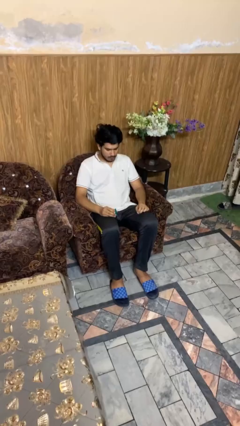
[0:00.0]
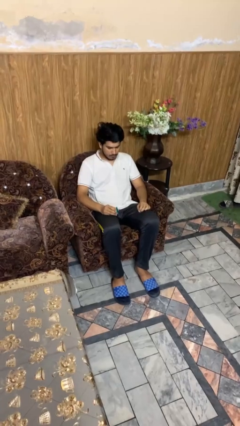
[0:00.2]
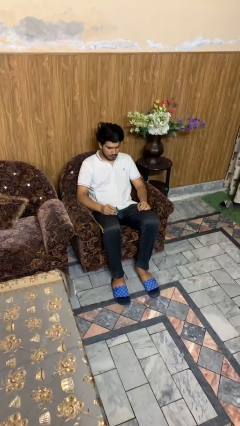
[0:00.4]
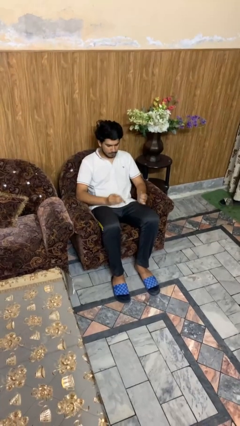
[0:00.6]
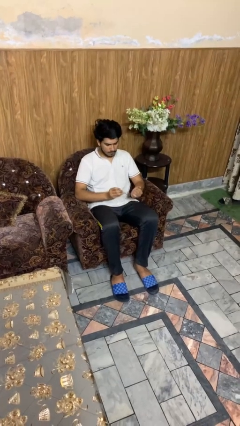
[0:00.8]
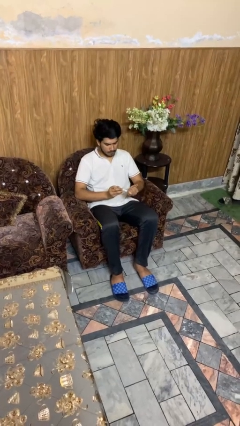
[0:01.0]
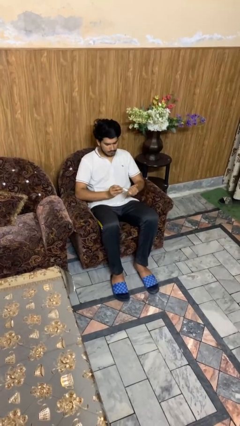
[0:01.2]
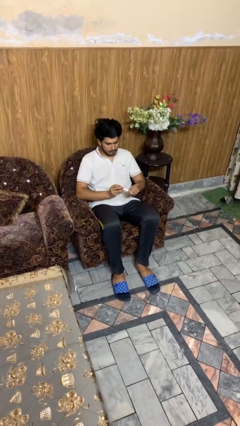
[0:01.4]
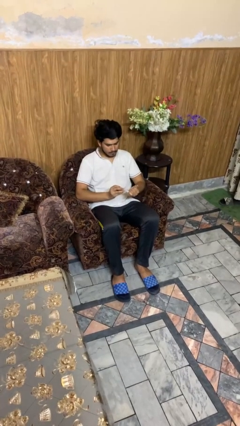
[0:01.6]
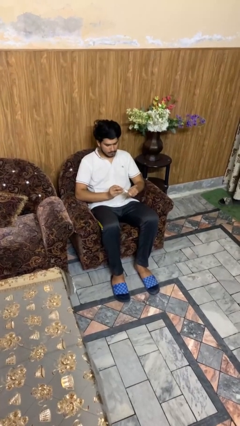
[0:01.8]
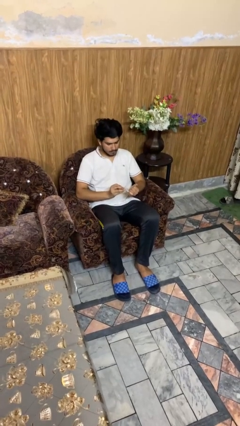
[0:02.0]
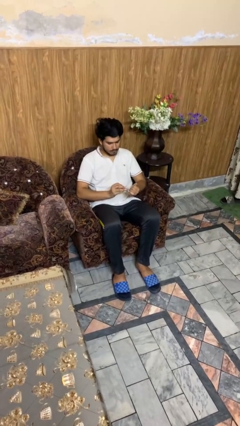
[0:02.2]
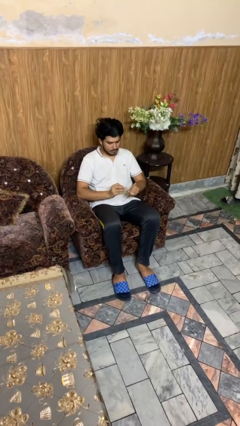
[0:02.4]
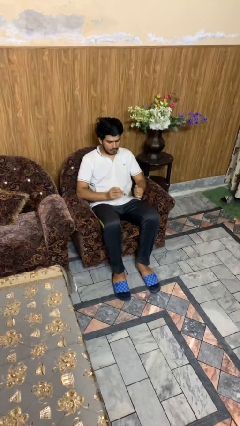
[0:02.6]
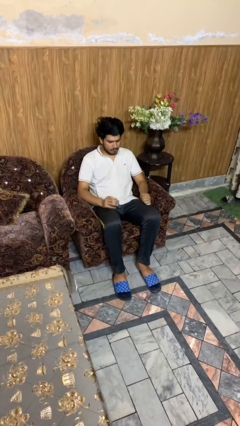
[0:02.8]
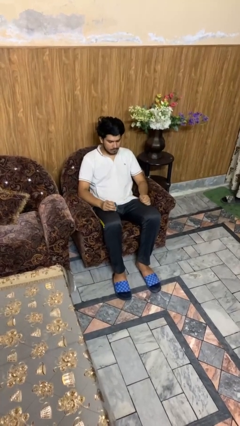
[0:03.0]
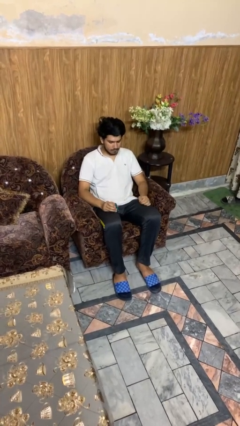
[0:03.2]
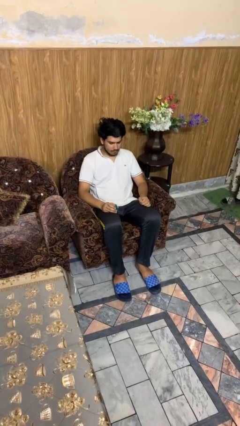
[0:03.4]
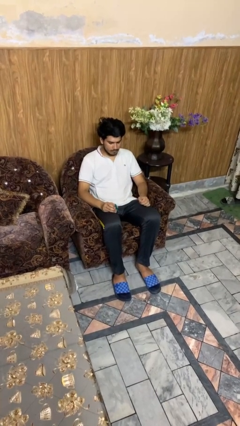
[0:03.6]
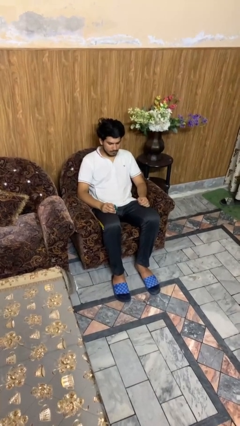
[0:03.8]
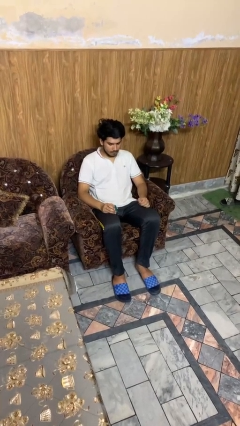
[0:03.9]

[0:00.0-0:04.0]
person clips fingernails

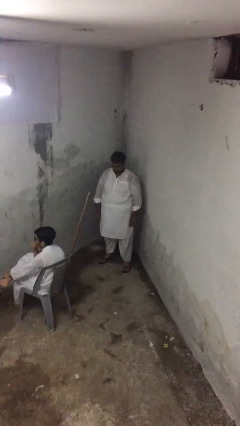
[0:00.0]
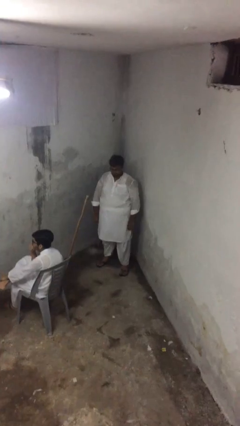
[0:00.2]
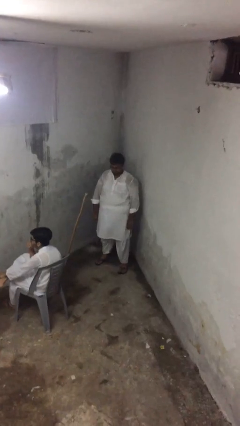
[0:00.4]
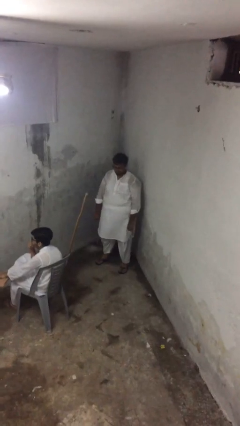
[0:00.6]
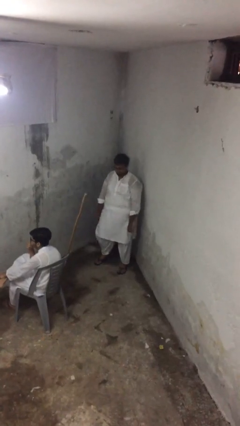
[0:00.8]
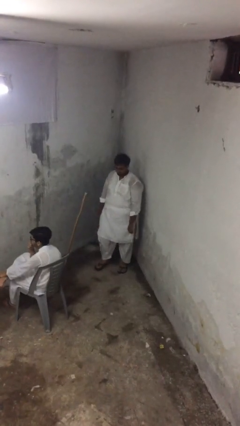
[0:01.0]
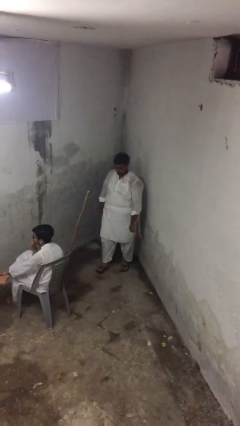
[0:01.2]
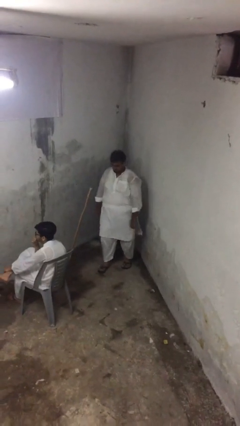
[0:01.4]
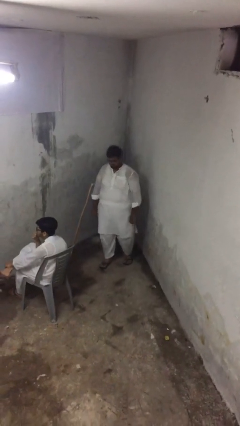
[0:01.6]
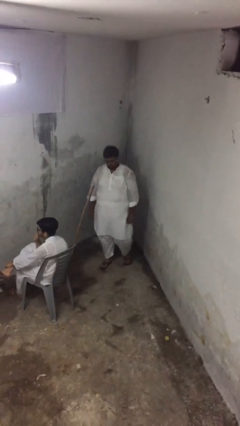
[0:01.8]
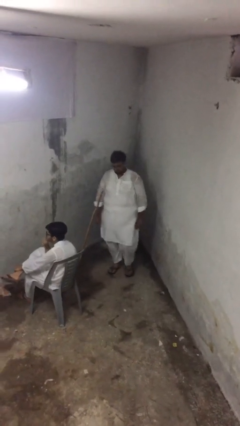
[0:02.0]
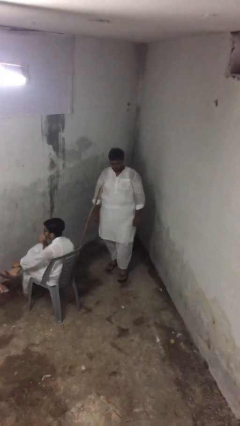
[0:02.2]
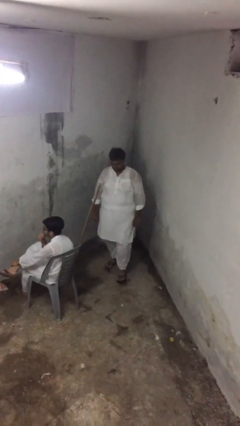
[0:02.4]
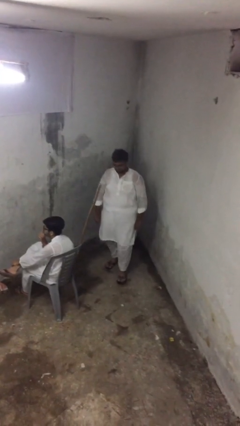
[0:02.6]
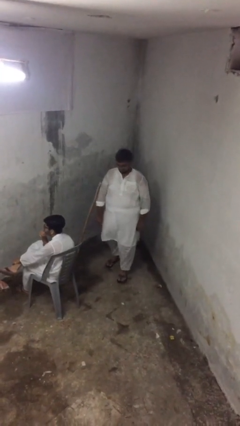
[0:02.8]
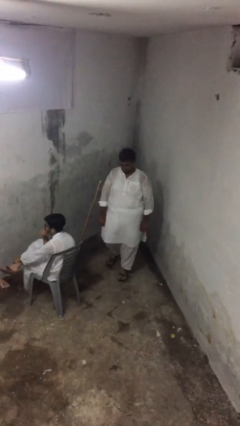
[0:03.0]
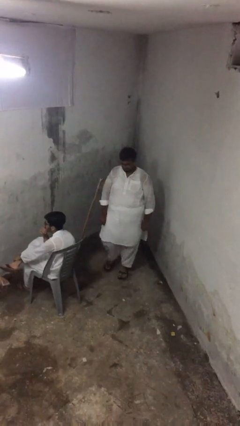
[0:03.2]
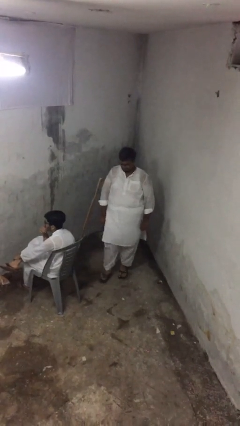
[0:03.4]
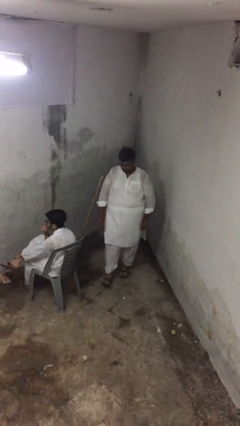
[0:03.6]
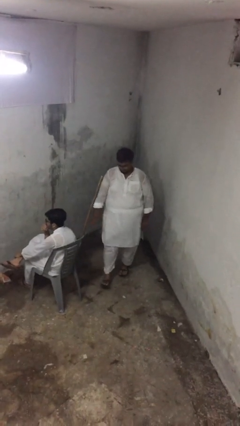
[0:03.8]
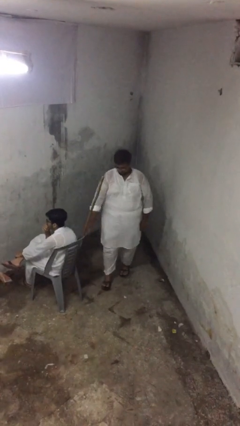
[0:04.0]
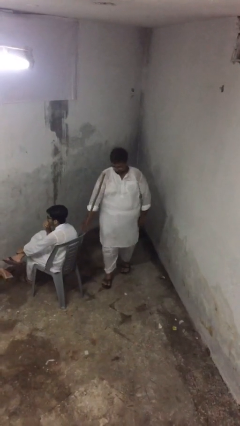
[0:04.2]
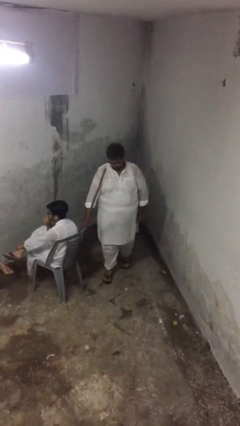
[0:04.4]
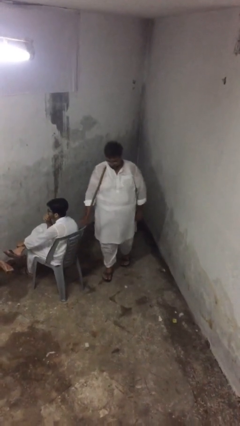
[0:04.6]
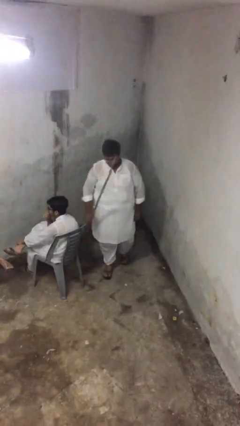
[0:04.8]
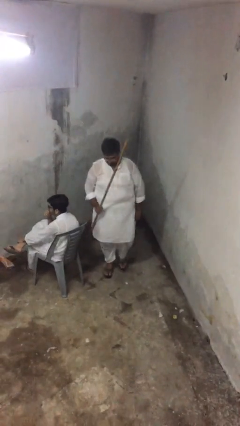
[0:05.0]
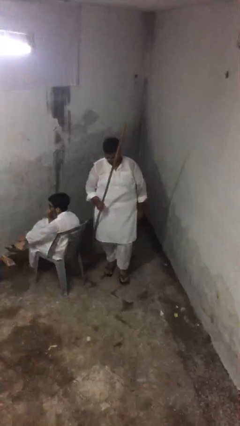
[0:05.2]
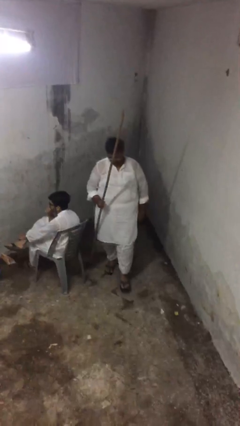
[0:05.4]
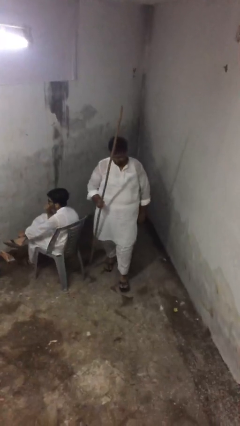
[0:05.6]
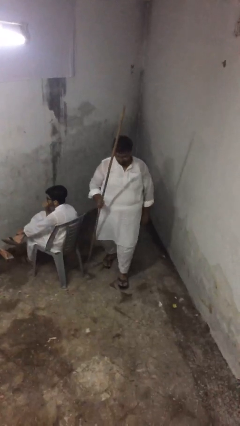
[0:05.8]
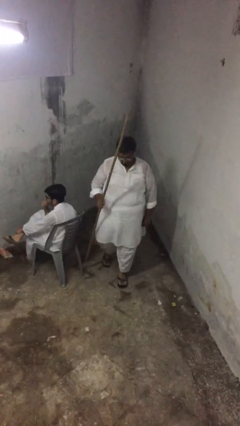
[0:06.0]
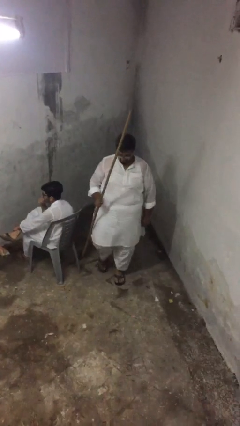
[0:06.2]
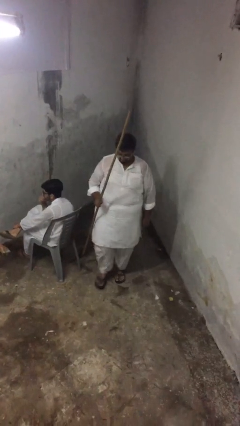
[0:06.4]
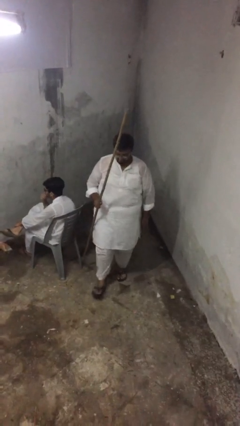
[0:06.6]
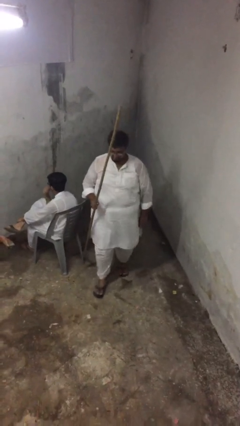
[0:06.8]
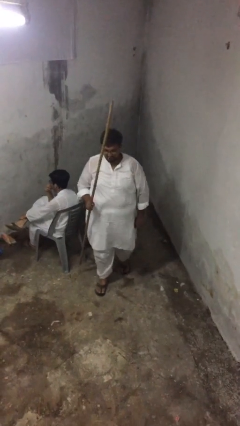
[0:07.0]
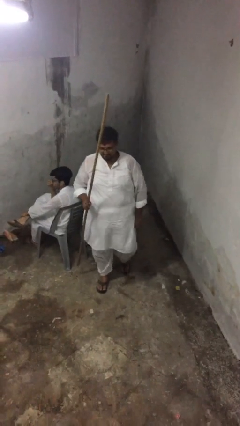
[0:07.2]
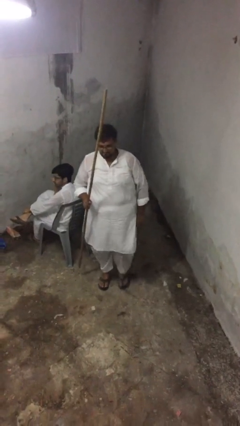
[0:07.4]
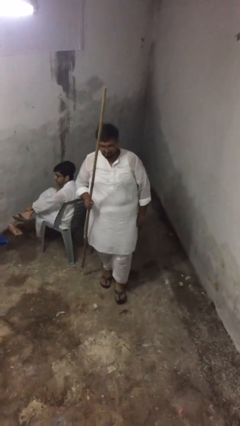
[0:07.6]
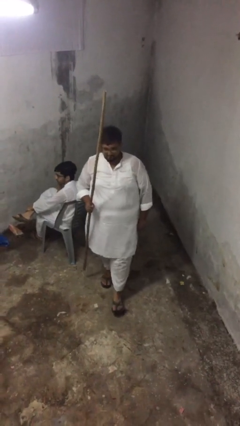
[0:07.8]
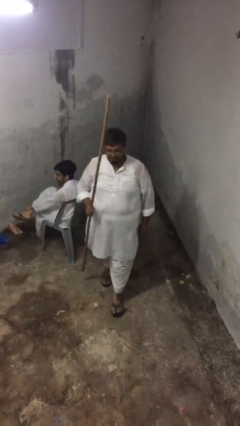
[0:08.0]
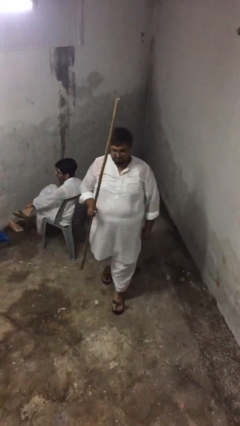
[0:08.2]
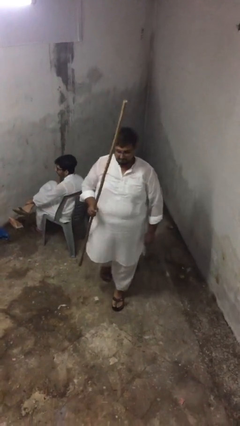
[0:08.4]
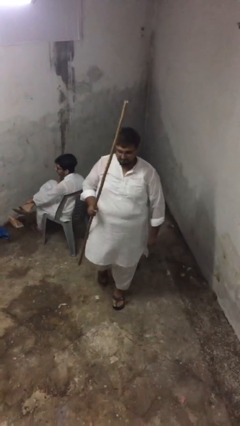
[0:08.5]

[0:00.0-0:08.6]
person steals object from person

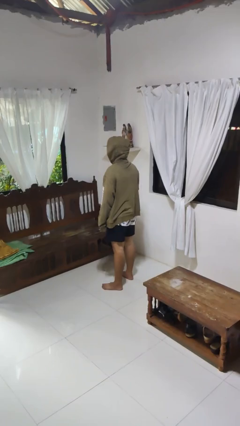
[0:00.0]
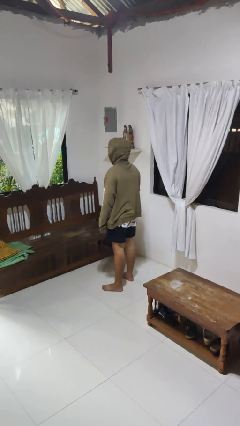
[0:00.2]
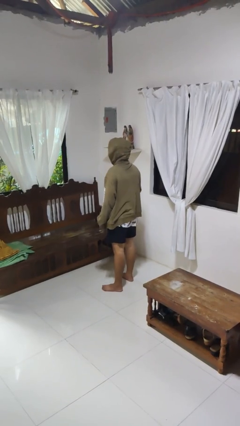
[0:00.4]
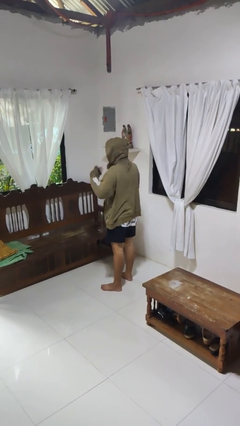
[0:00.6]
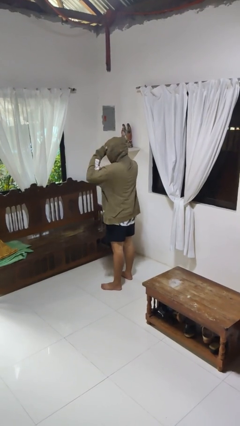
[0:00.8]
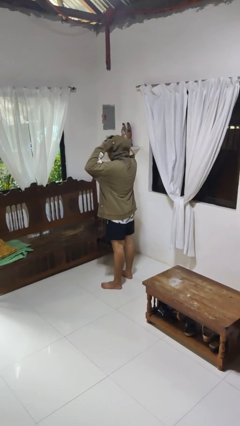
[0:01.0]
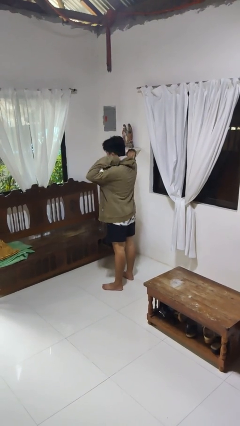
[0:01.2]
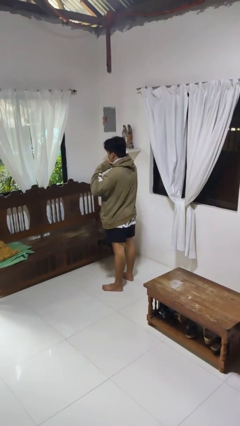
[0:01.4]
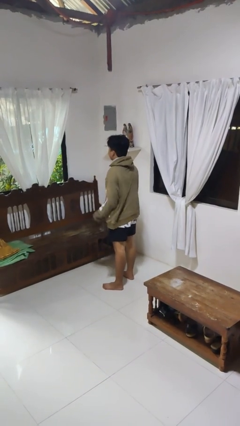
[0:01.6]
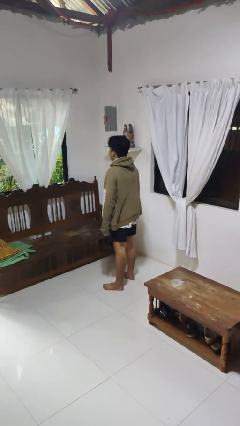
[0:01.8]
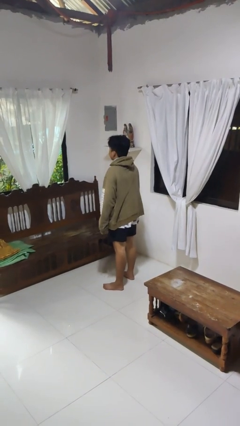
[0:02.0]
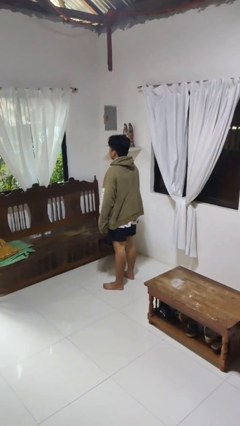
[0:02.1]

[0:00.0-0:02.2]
person takes off hoodie

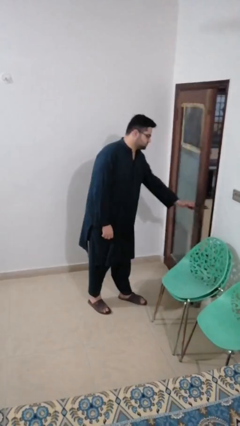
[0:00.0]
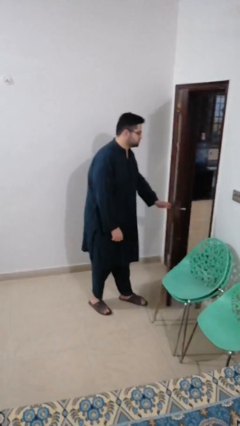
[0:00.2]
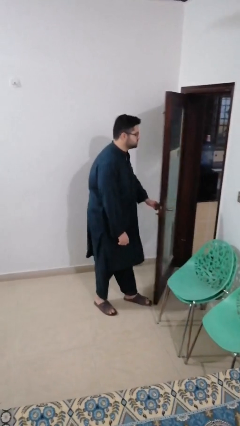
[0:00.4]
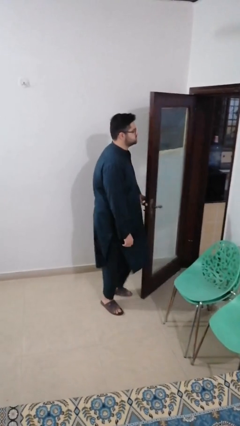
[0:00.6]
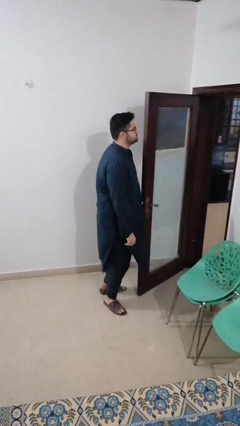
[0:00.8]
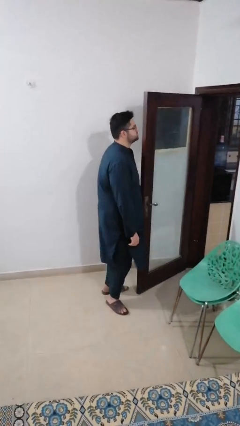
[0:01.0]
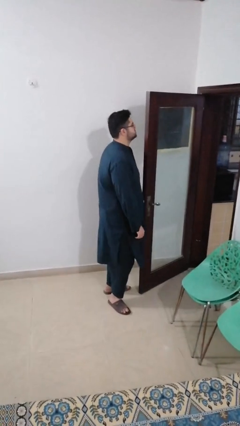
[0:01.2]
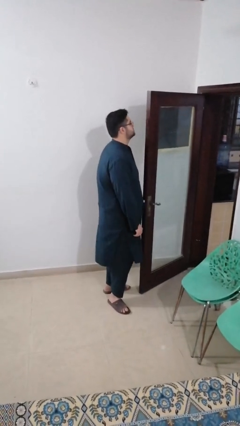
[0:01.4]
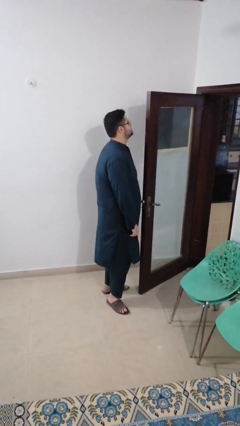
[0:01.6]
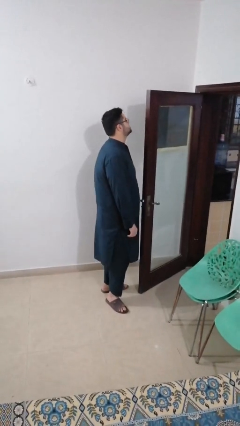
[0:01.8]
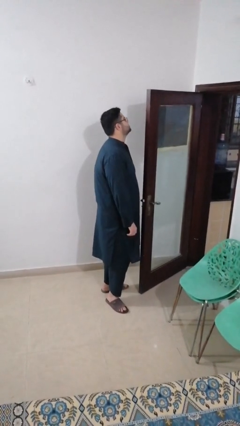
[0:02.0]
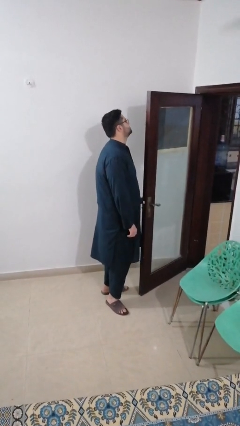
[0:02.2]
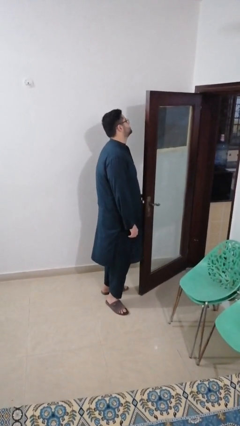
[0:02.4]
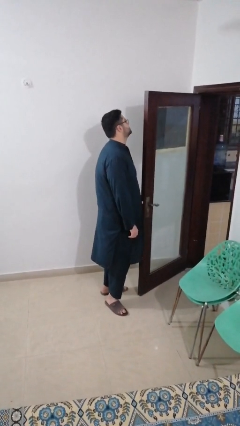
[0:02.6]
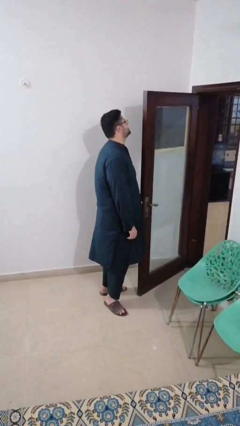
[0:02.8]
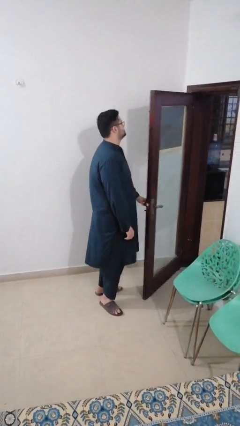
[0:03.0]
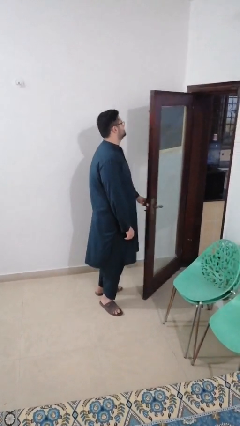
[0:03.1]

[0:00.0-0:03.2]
person opens facility door

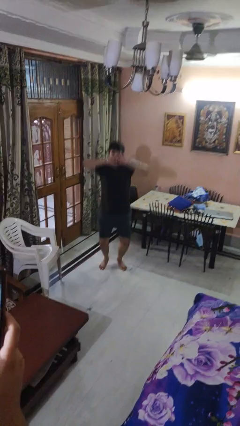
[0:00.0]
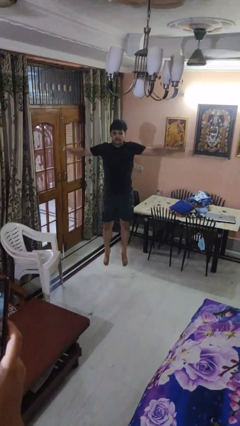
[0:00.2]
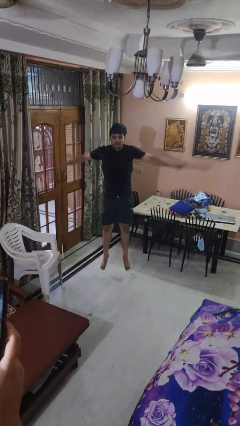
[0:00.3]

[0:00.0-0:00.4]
person jumps
